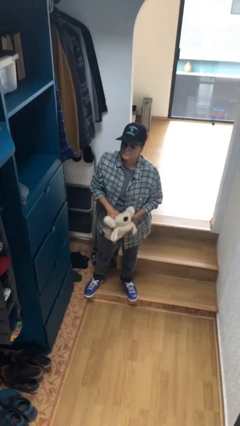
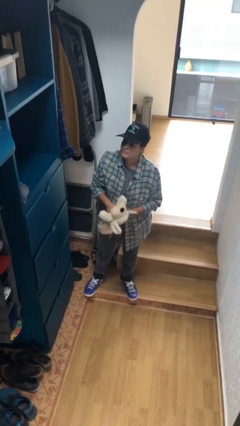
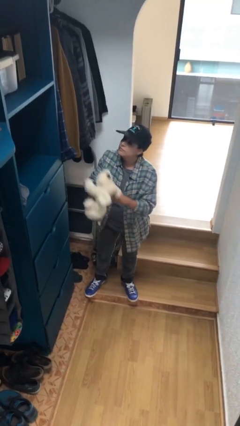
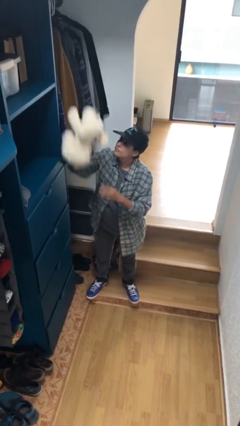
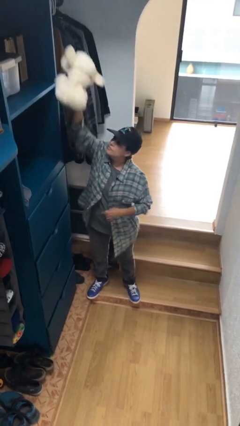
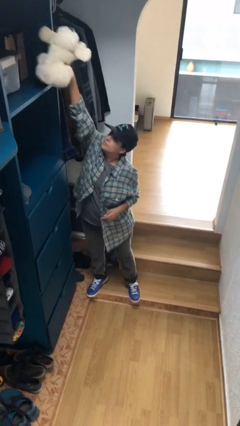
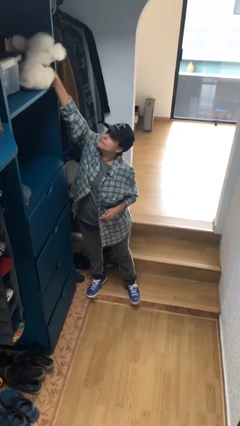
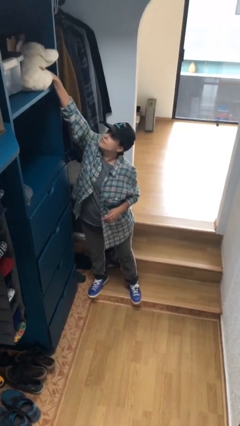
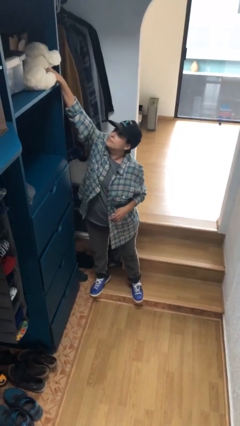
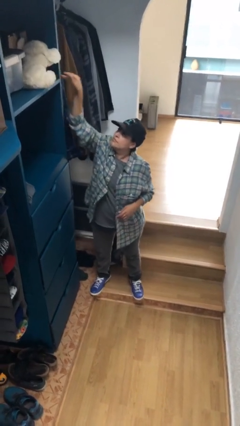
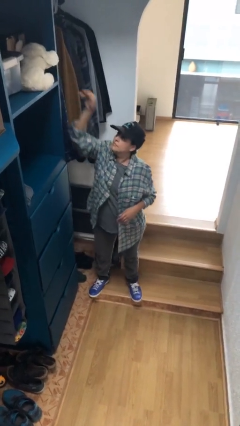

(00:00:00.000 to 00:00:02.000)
person puts down object on shelf

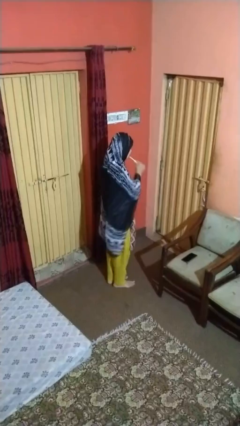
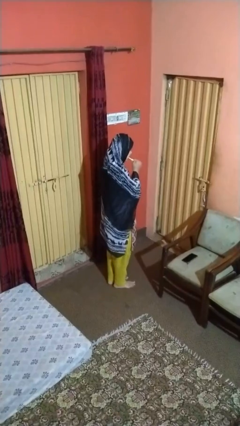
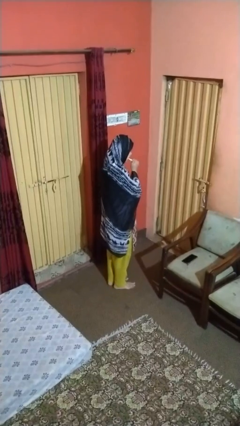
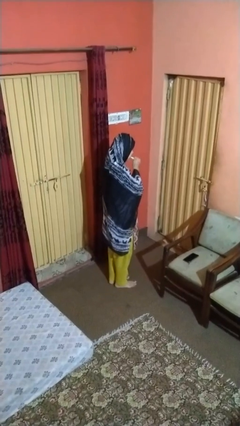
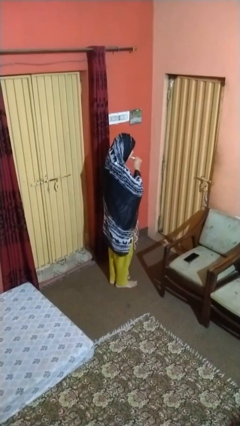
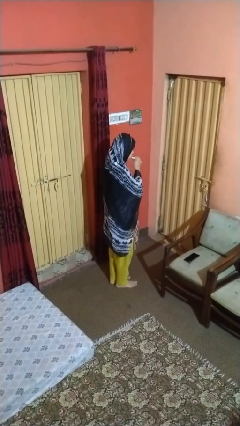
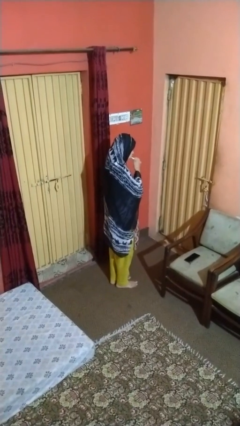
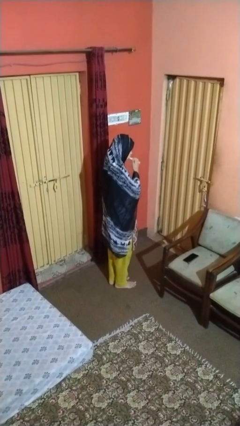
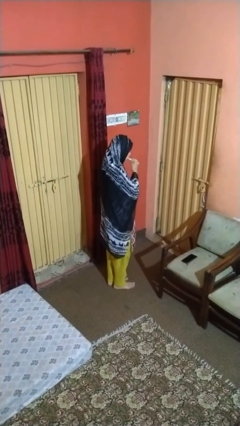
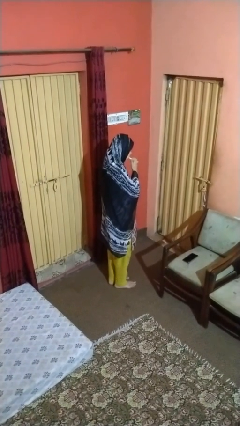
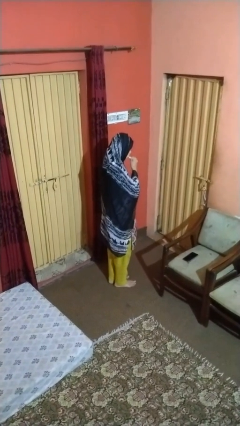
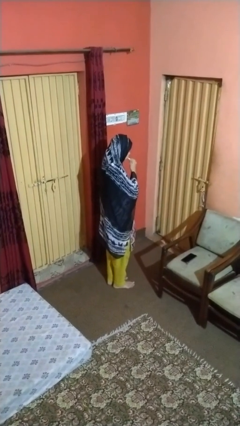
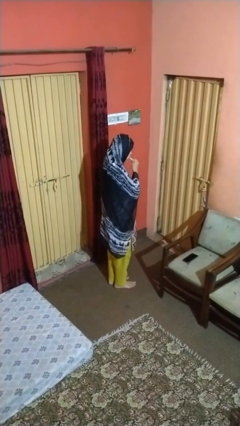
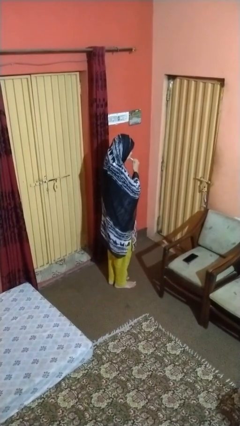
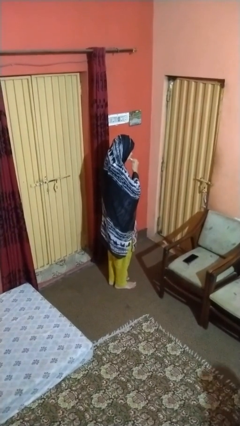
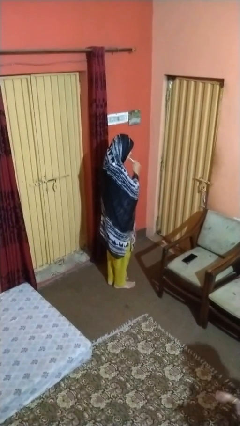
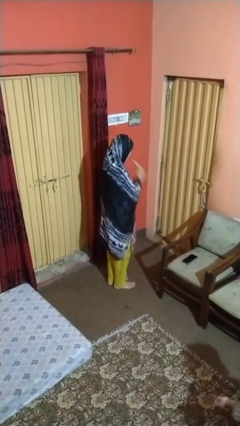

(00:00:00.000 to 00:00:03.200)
person brushes teeth

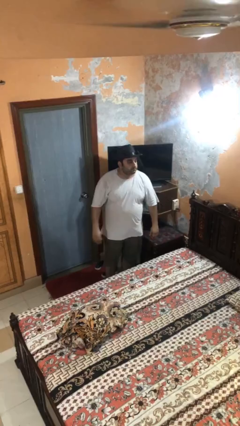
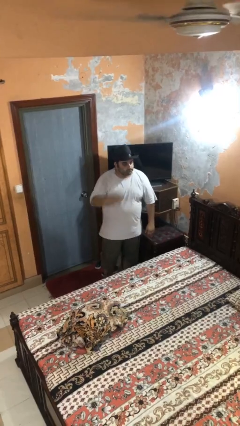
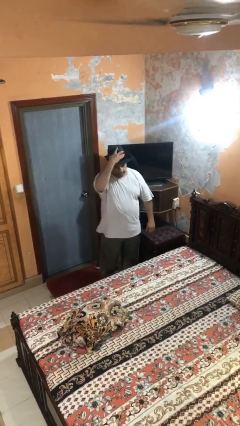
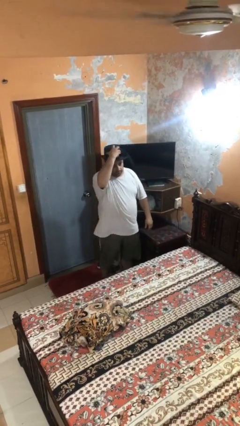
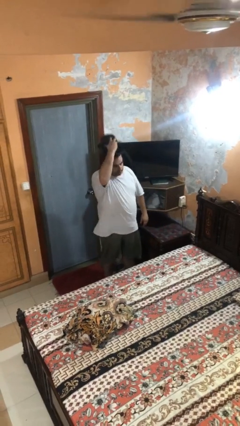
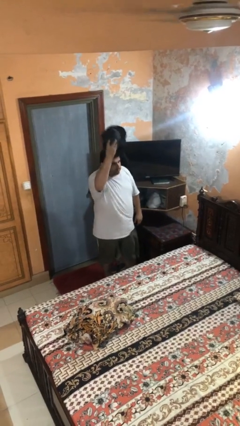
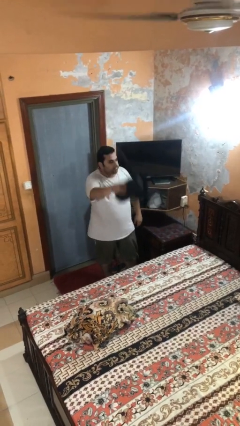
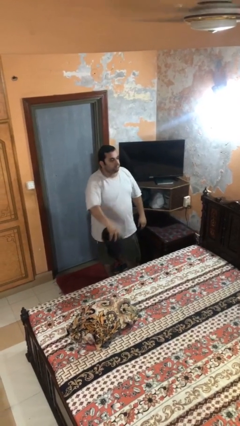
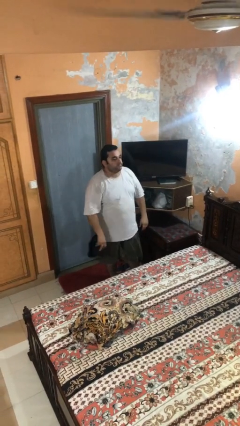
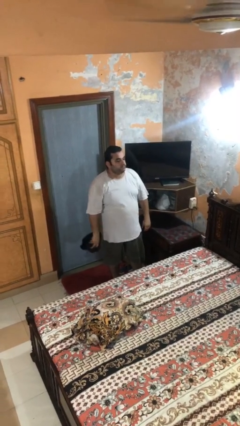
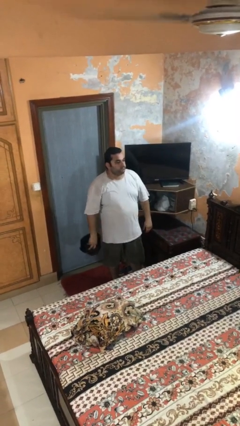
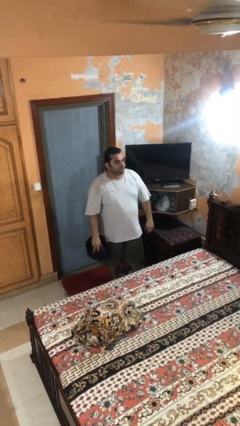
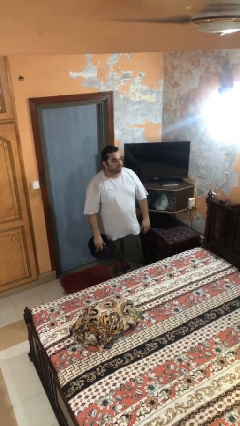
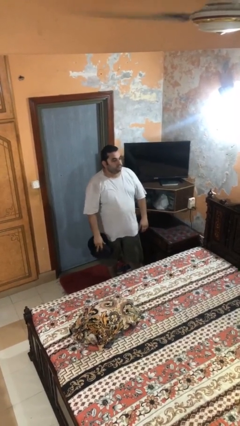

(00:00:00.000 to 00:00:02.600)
person takes off hat

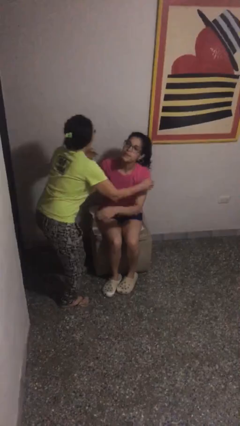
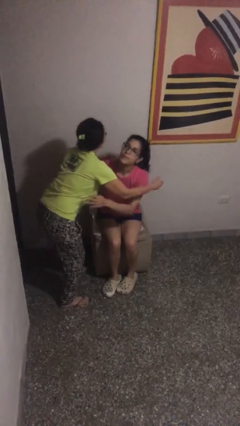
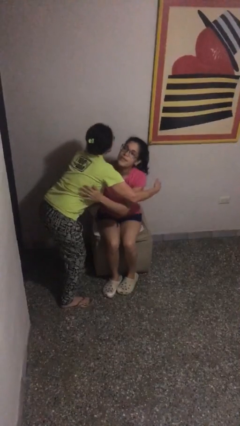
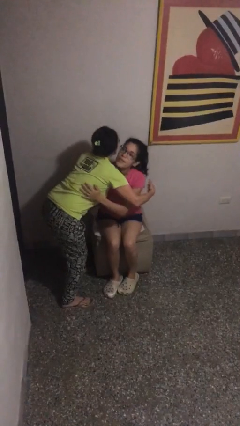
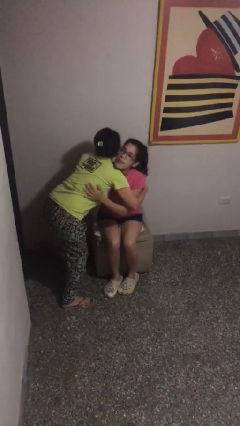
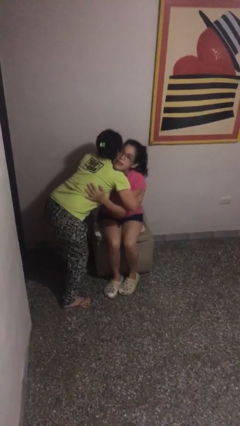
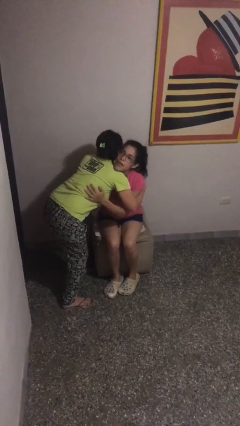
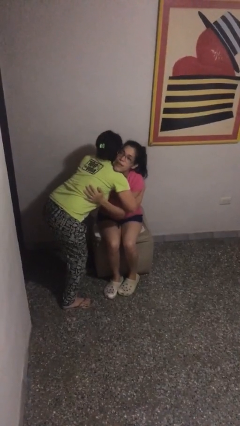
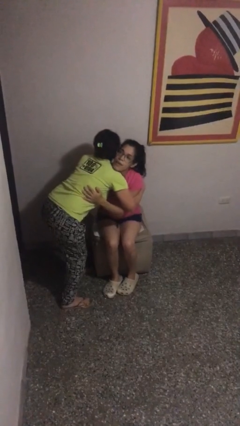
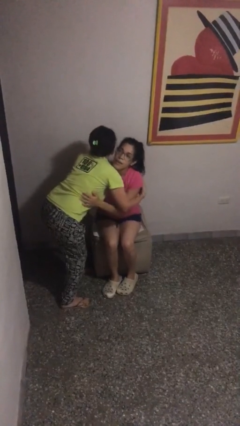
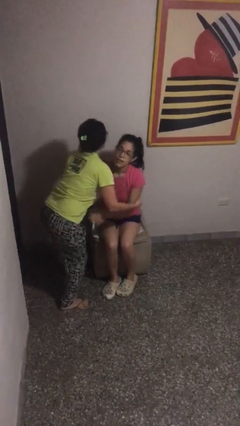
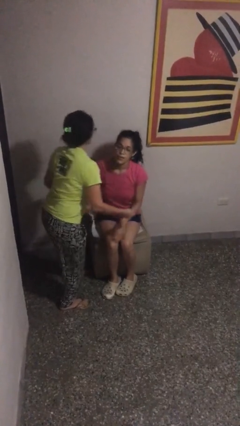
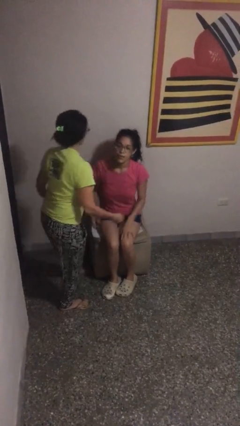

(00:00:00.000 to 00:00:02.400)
person embraces person

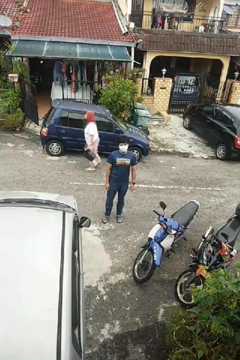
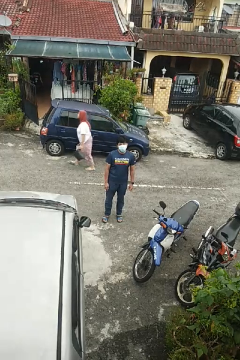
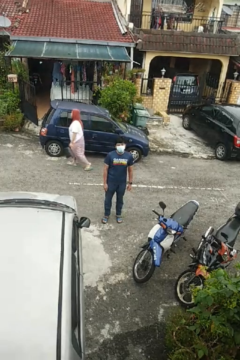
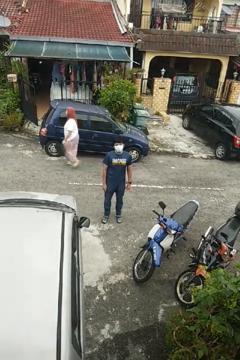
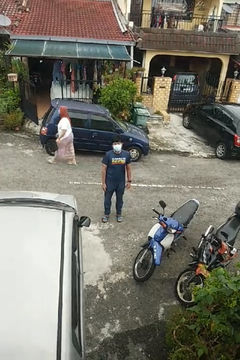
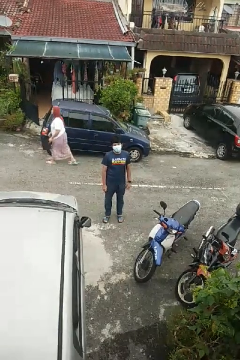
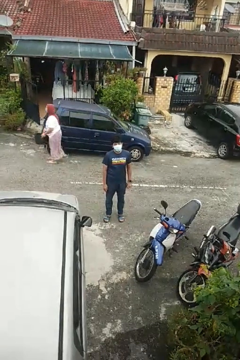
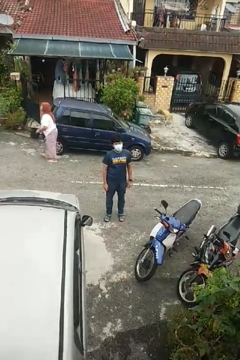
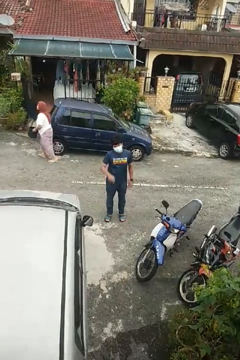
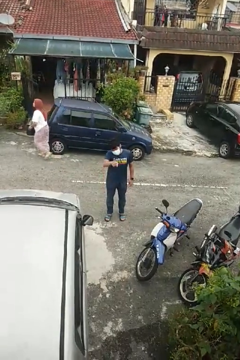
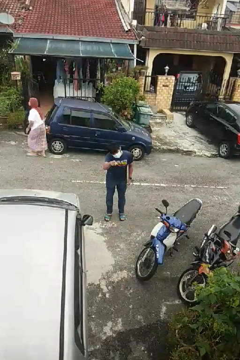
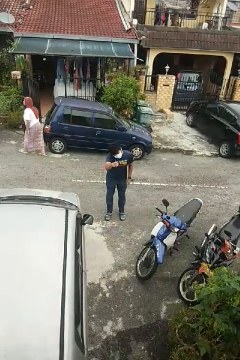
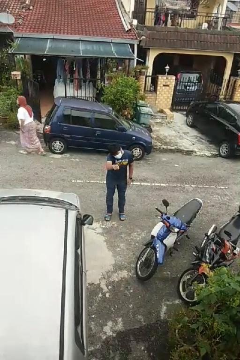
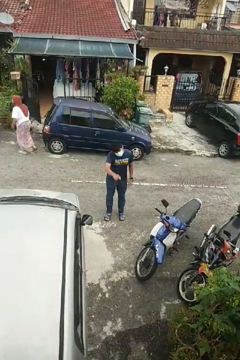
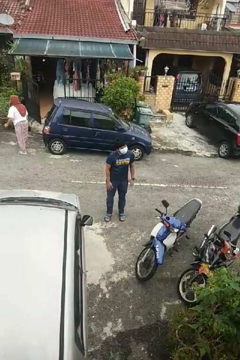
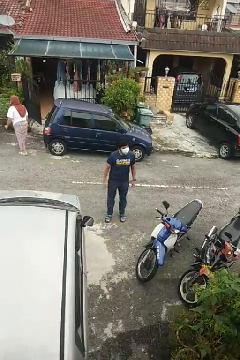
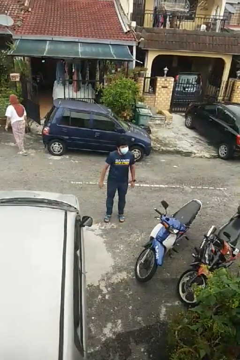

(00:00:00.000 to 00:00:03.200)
person points at person

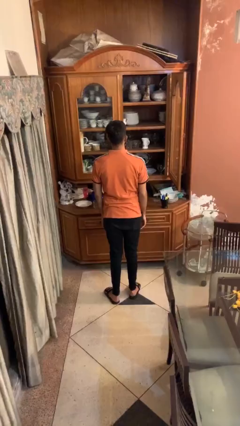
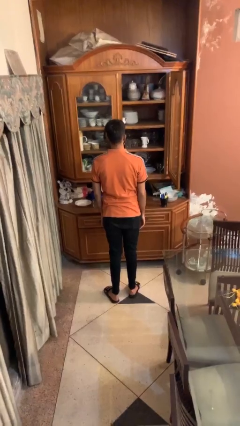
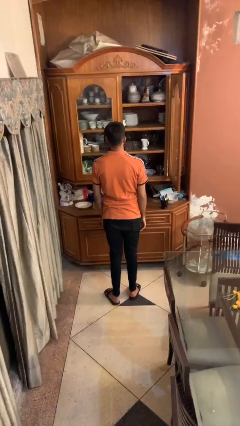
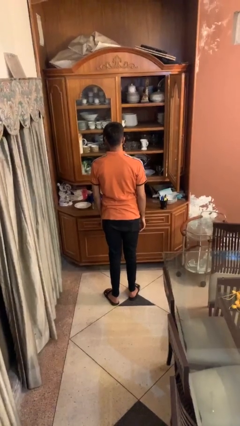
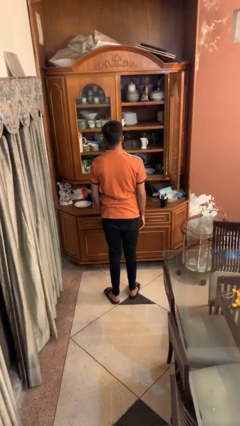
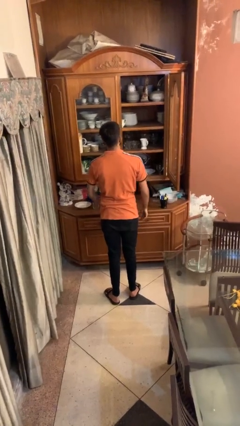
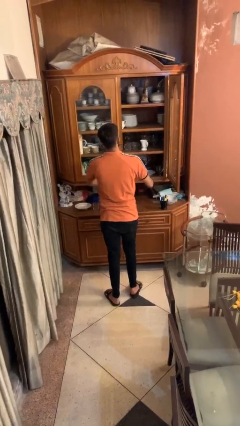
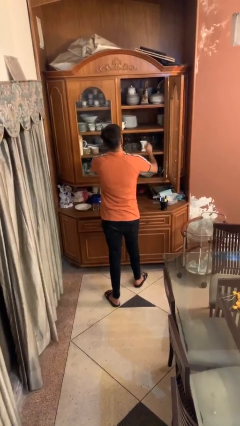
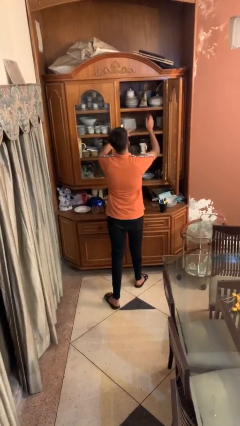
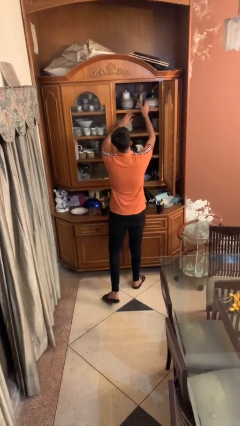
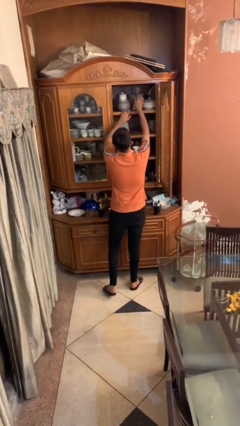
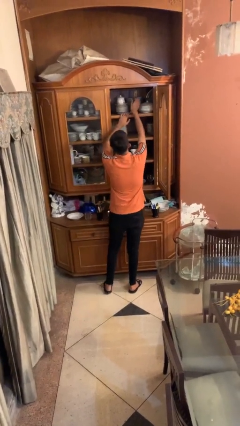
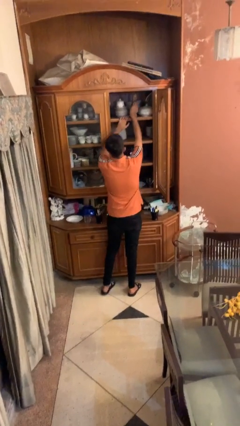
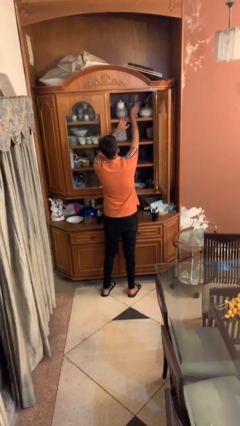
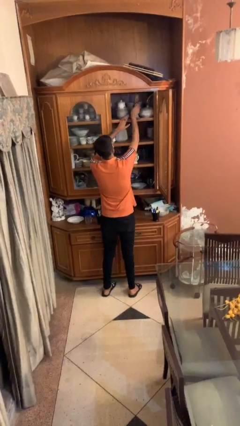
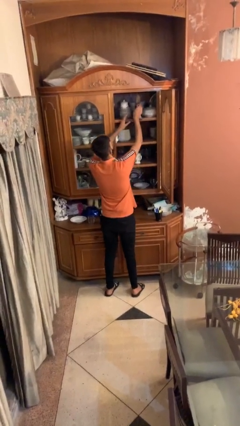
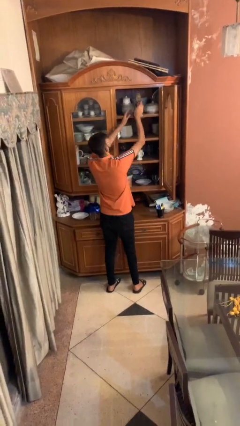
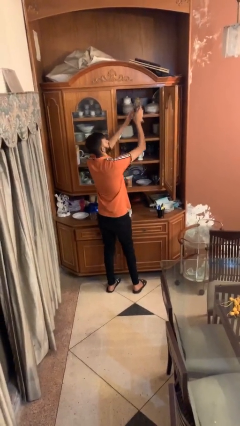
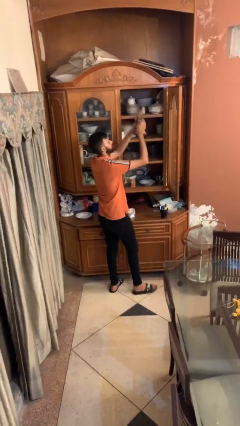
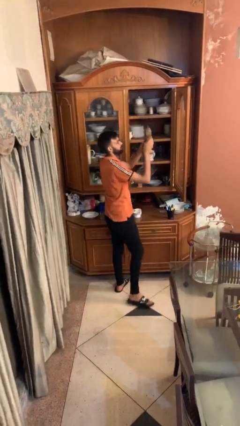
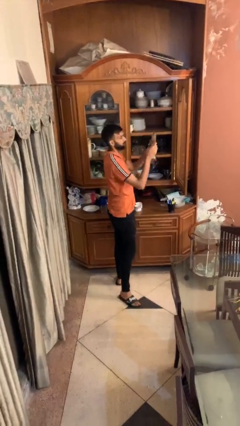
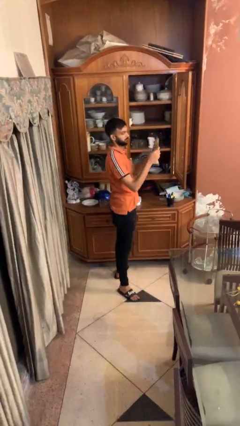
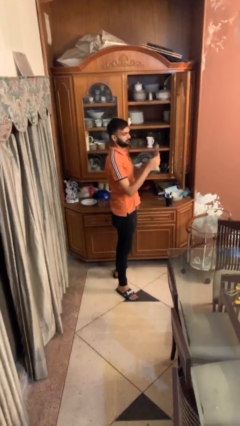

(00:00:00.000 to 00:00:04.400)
person picks up object from shelf
